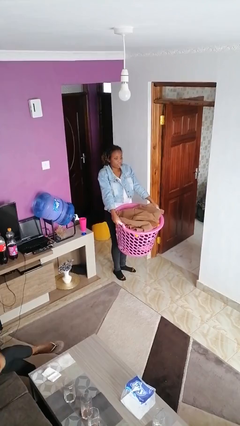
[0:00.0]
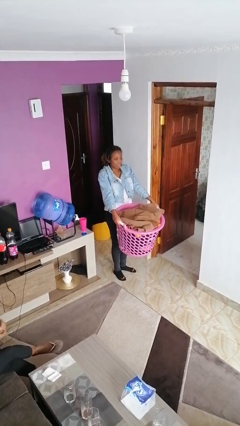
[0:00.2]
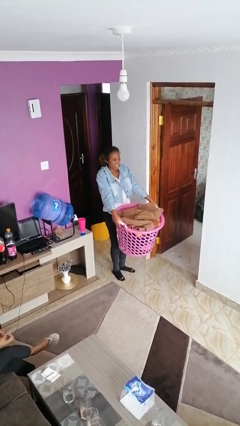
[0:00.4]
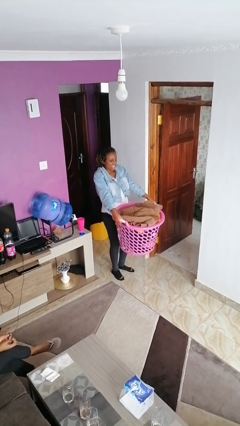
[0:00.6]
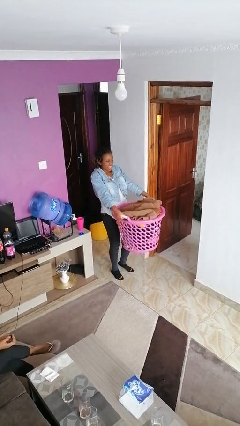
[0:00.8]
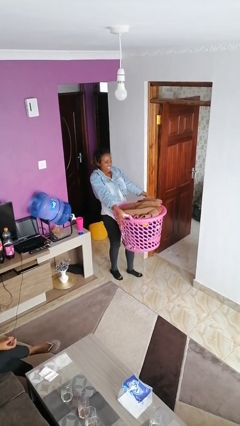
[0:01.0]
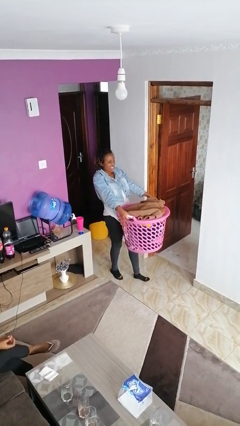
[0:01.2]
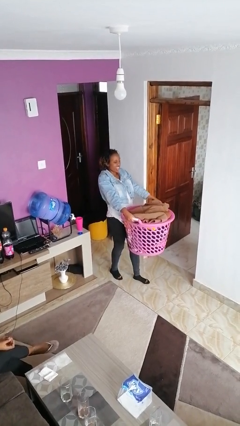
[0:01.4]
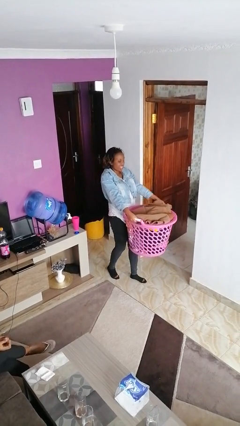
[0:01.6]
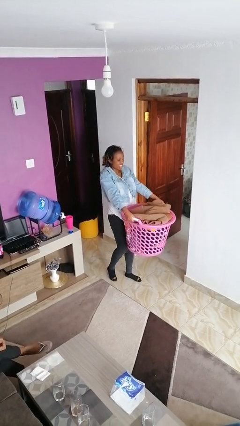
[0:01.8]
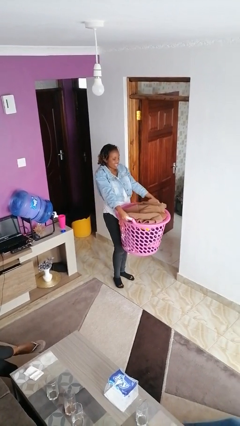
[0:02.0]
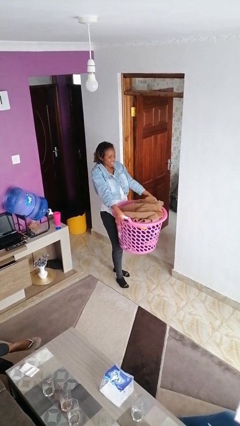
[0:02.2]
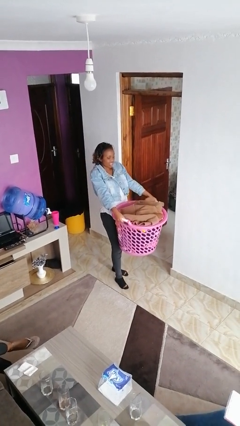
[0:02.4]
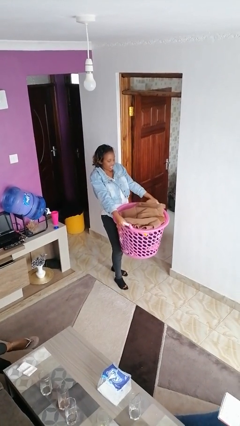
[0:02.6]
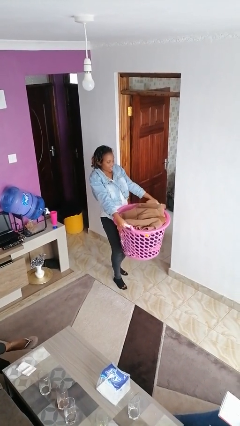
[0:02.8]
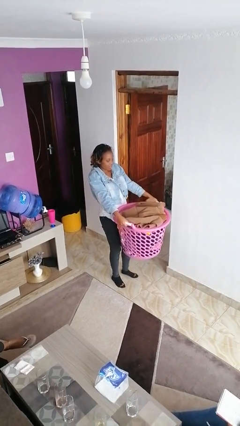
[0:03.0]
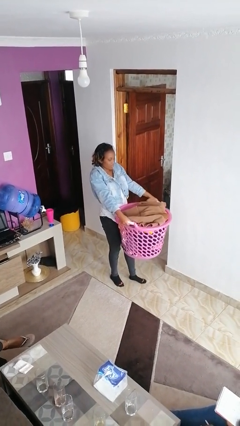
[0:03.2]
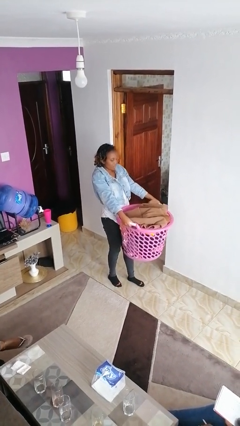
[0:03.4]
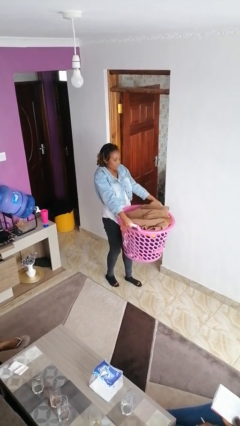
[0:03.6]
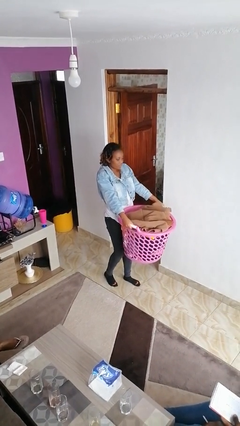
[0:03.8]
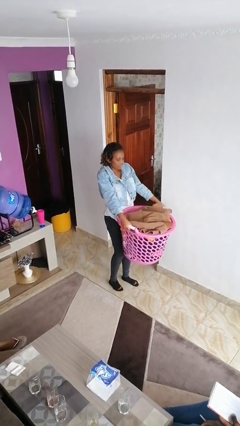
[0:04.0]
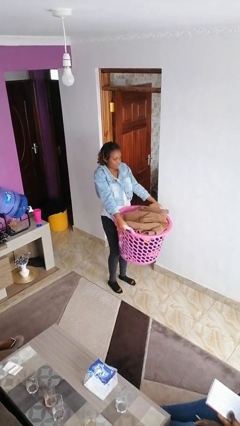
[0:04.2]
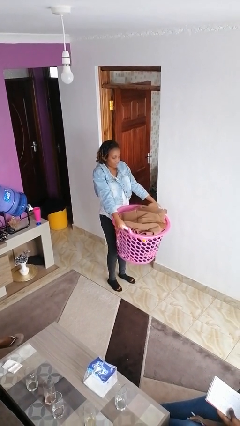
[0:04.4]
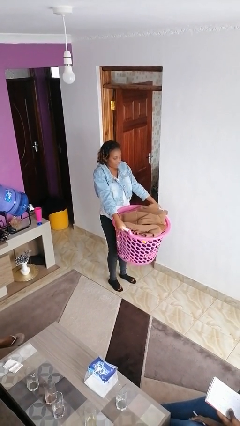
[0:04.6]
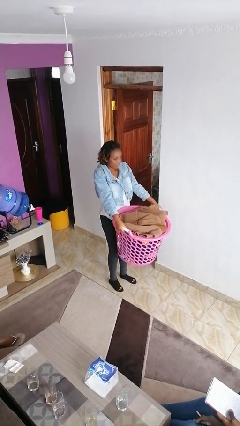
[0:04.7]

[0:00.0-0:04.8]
person carries laundry basket

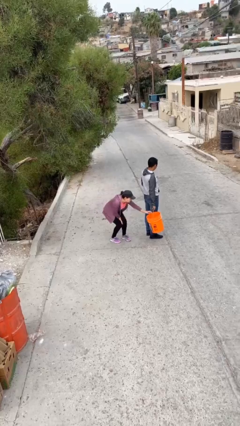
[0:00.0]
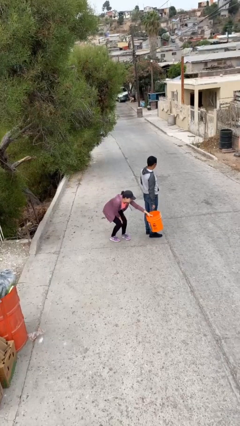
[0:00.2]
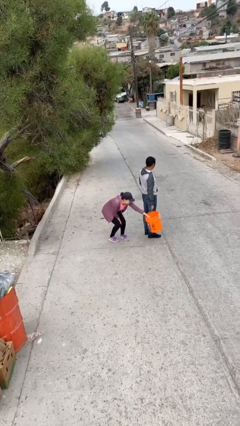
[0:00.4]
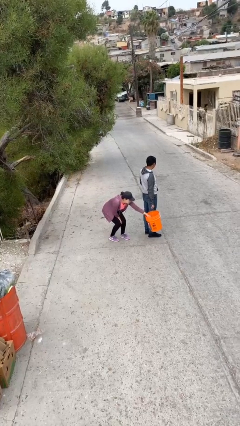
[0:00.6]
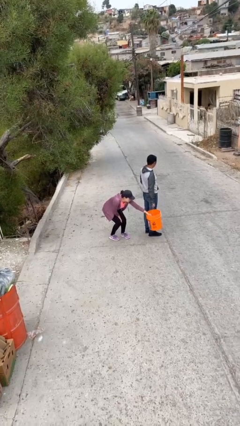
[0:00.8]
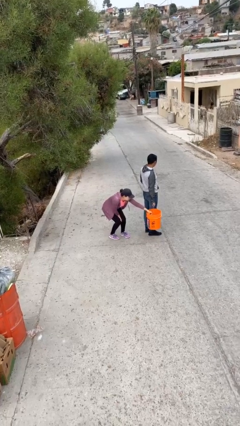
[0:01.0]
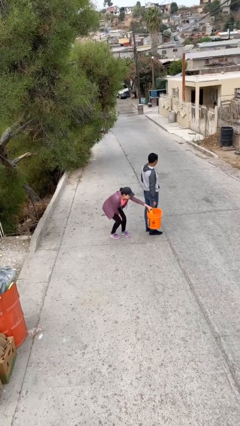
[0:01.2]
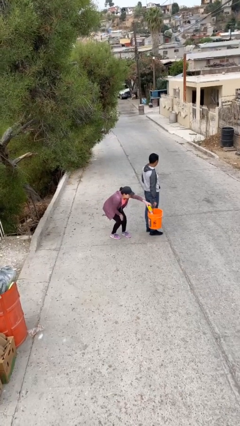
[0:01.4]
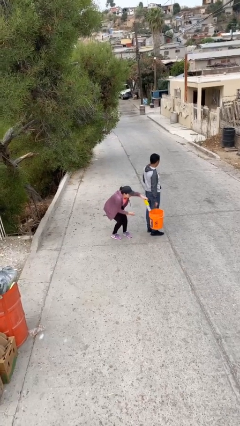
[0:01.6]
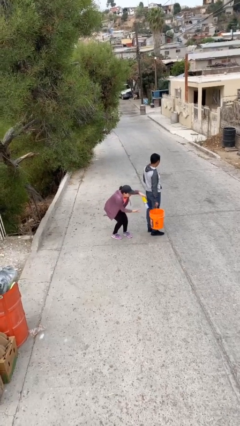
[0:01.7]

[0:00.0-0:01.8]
person steals object from person

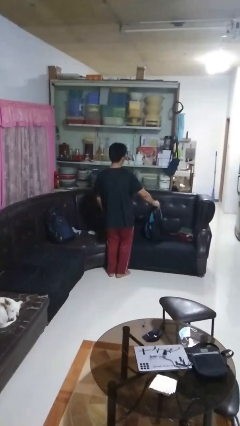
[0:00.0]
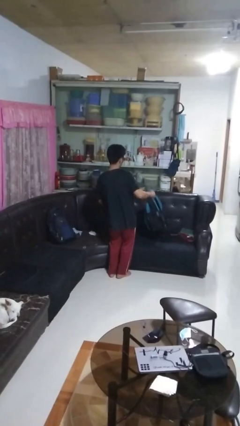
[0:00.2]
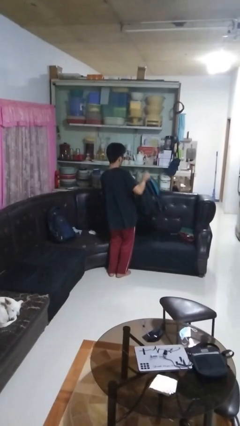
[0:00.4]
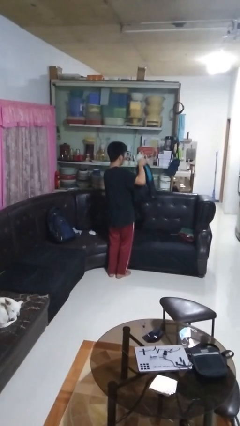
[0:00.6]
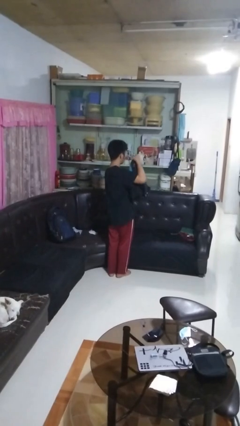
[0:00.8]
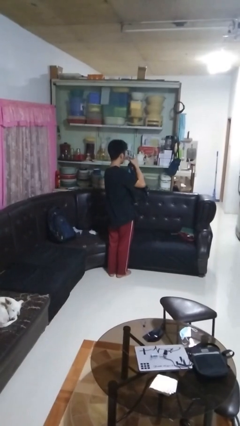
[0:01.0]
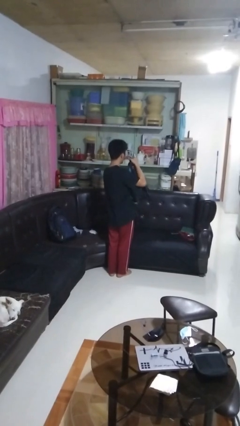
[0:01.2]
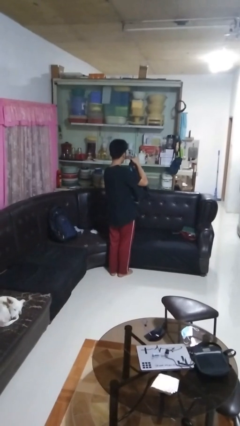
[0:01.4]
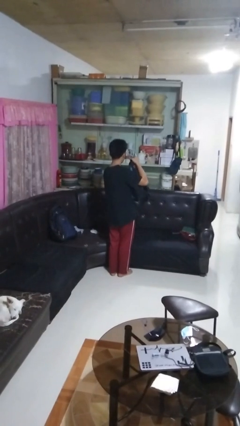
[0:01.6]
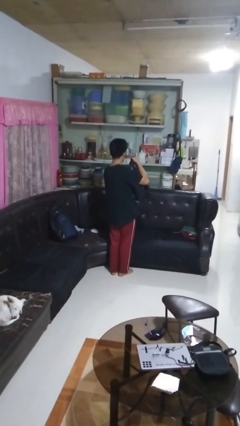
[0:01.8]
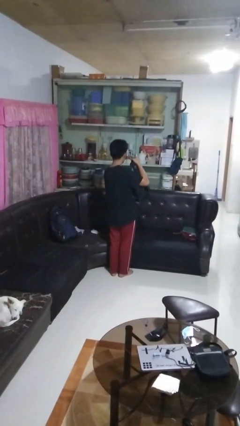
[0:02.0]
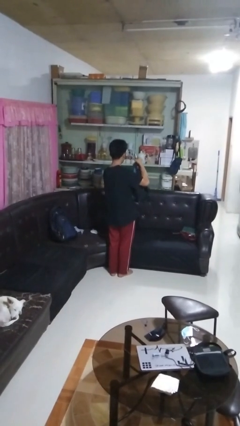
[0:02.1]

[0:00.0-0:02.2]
person picks up object from couch

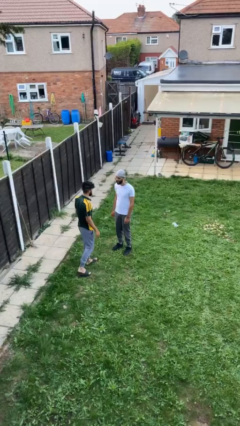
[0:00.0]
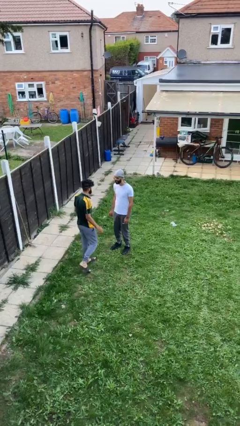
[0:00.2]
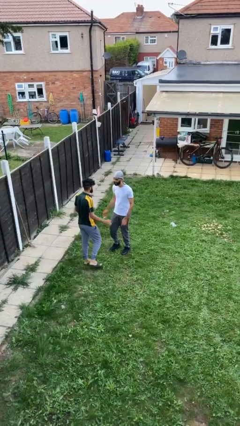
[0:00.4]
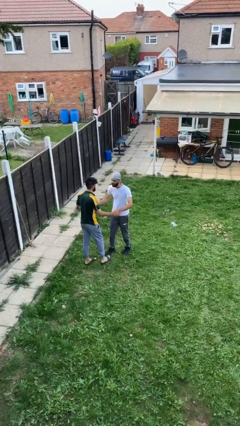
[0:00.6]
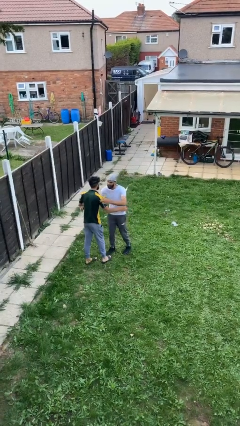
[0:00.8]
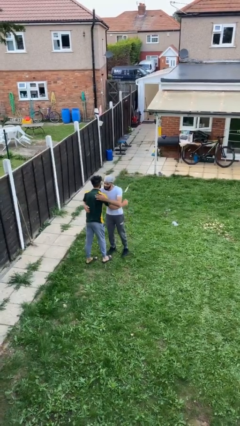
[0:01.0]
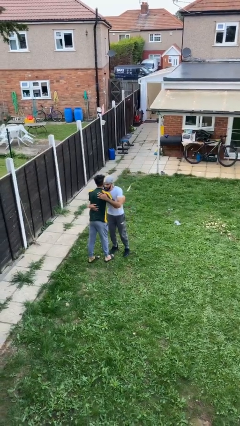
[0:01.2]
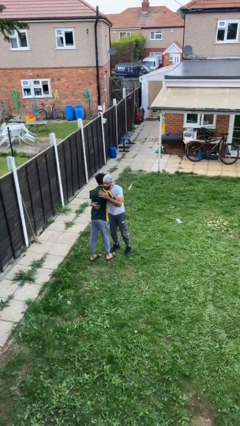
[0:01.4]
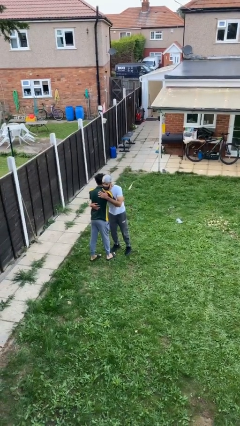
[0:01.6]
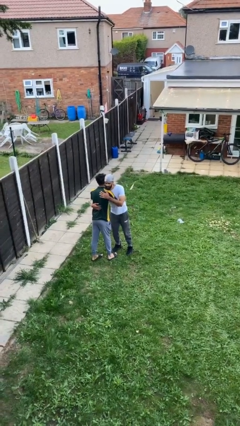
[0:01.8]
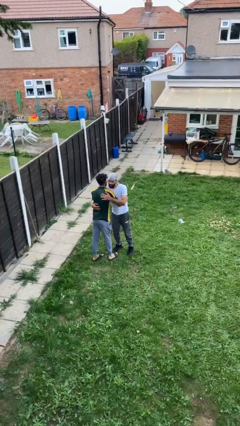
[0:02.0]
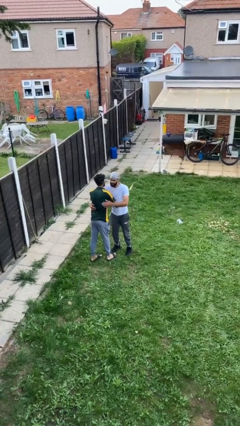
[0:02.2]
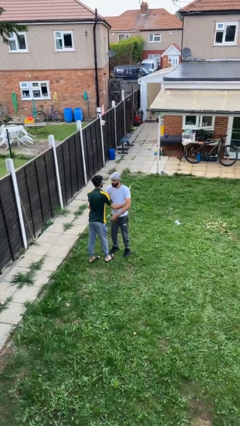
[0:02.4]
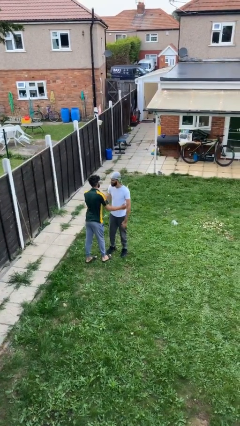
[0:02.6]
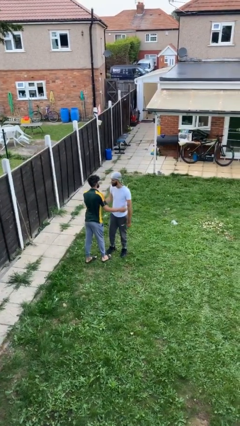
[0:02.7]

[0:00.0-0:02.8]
person embraces person

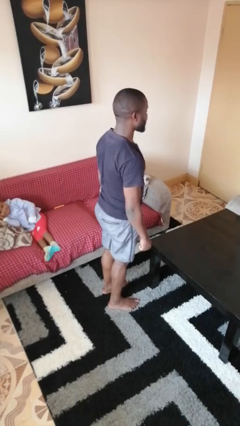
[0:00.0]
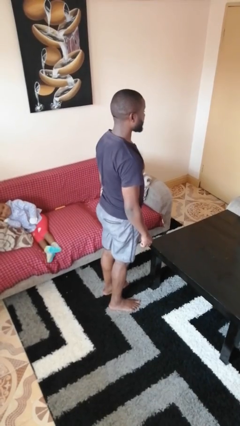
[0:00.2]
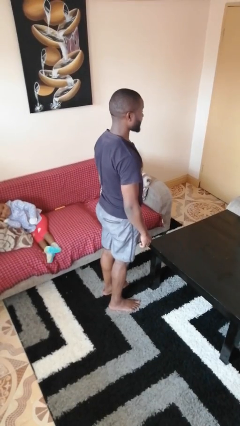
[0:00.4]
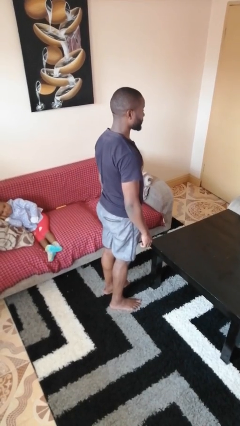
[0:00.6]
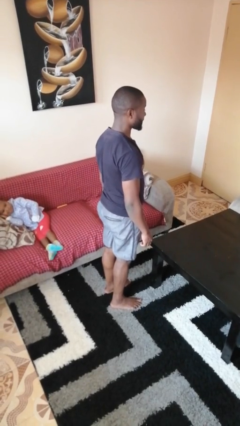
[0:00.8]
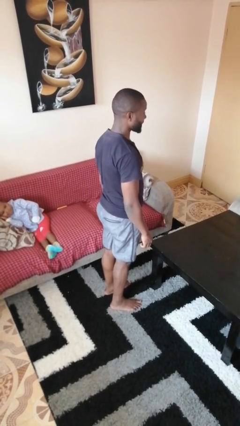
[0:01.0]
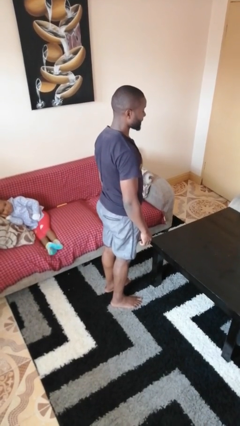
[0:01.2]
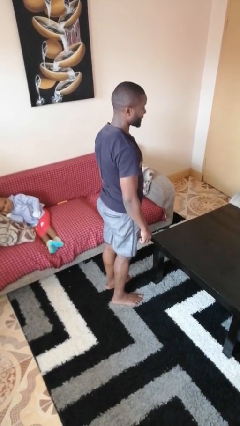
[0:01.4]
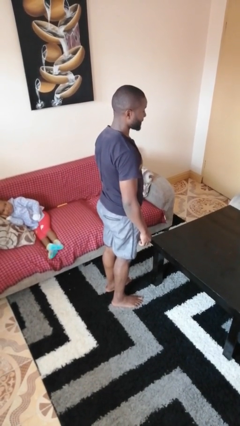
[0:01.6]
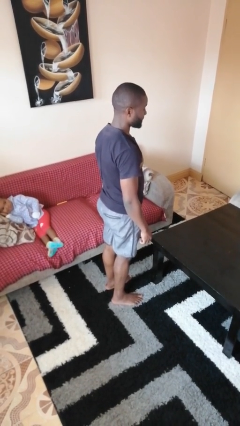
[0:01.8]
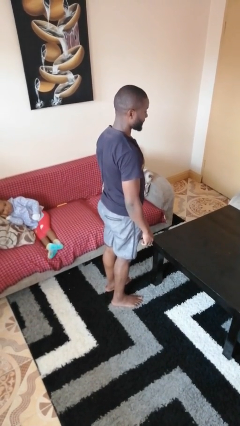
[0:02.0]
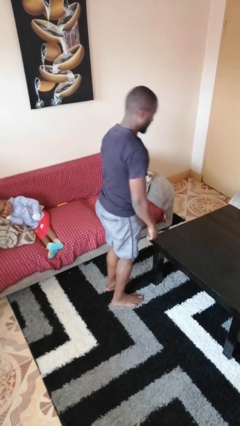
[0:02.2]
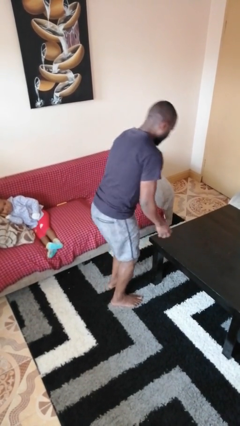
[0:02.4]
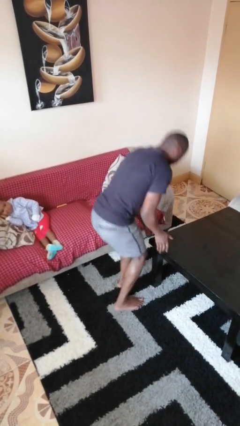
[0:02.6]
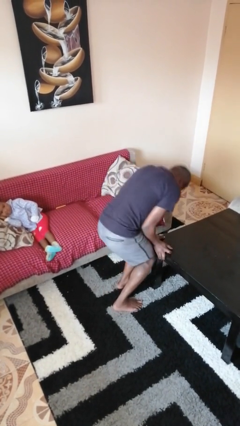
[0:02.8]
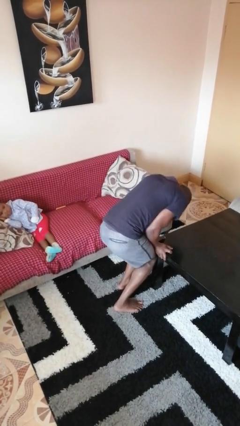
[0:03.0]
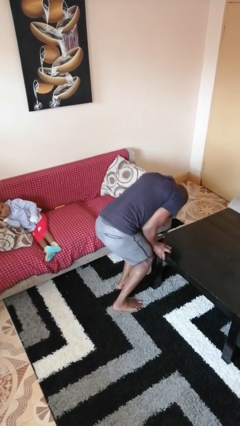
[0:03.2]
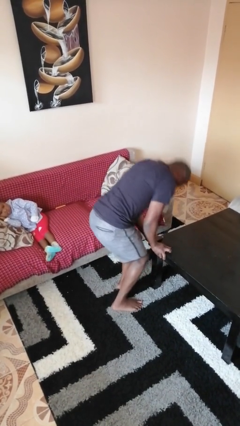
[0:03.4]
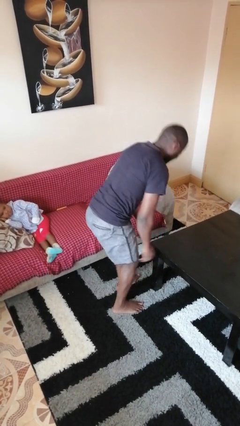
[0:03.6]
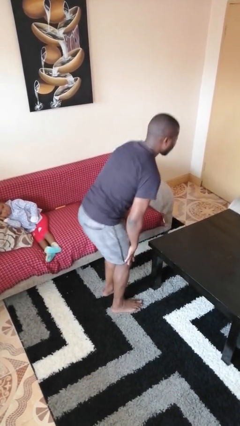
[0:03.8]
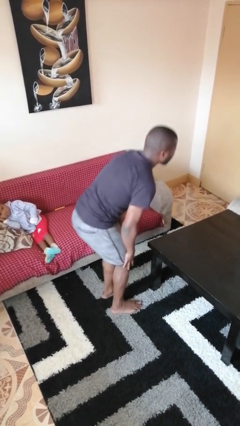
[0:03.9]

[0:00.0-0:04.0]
person bumps into table

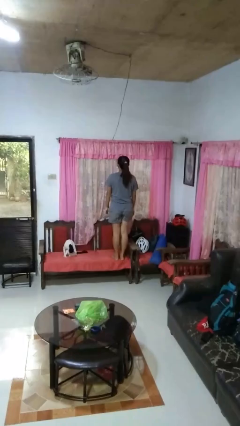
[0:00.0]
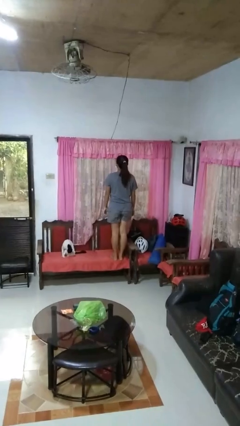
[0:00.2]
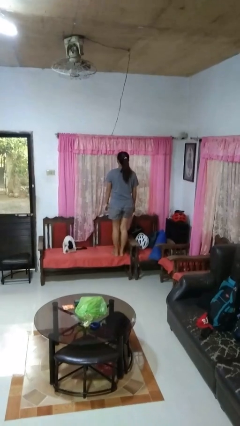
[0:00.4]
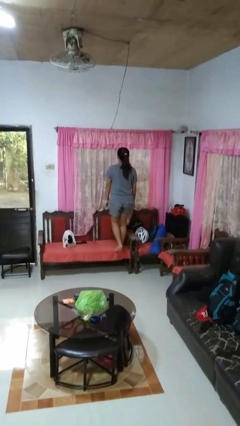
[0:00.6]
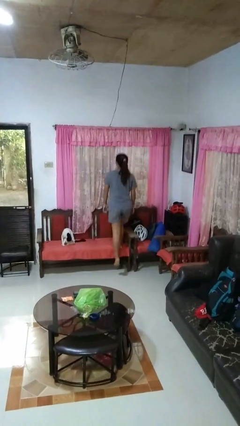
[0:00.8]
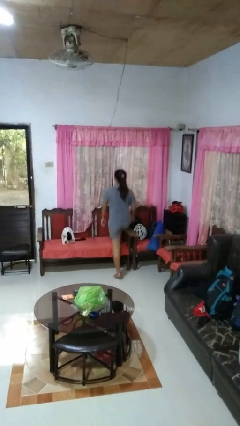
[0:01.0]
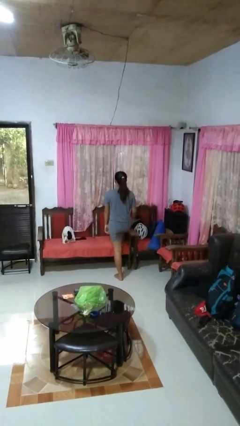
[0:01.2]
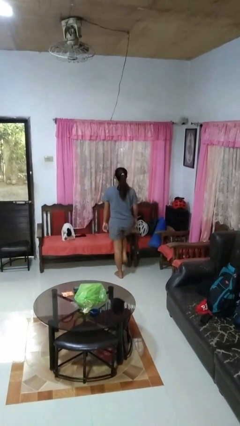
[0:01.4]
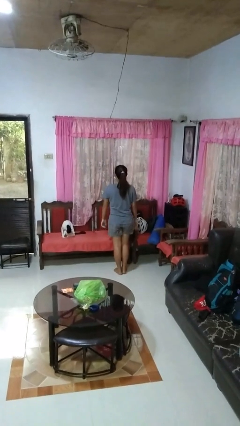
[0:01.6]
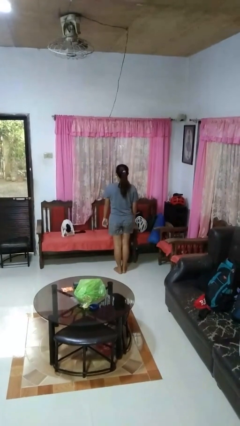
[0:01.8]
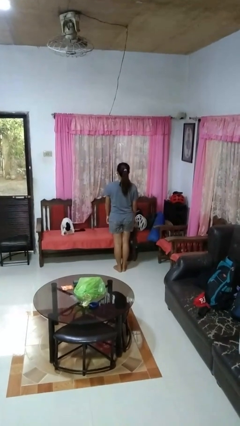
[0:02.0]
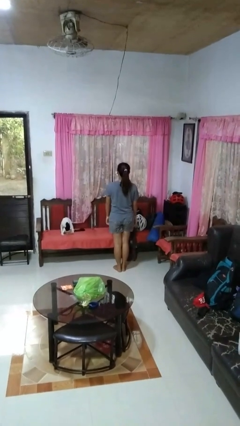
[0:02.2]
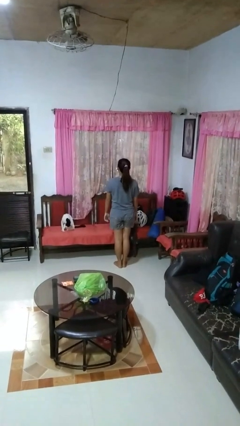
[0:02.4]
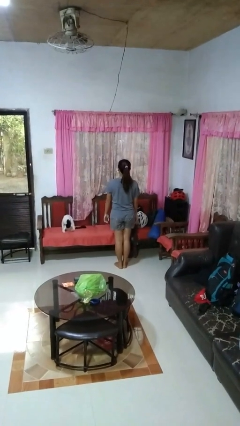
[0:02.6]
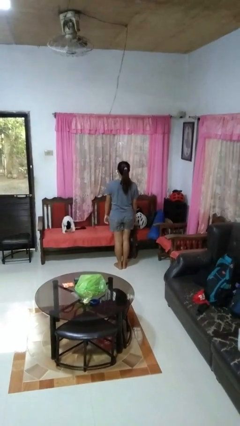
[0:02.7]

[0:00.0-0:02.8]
person climbs off chair
